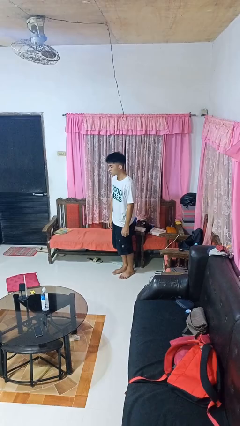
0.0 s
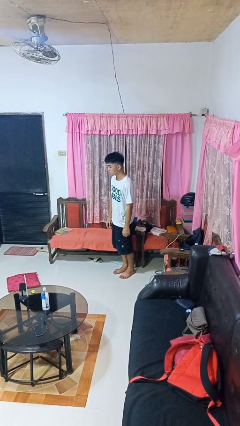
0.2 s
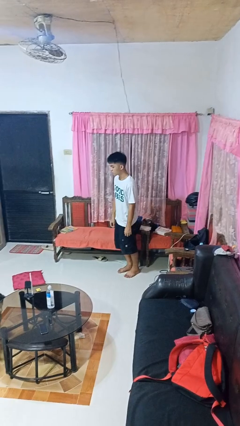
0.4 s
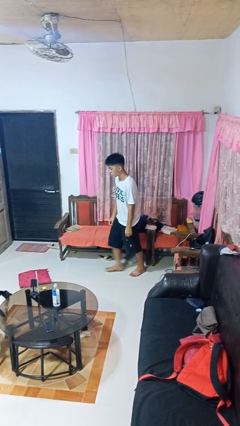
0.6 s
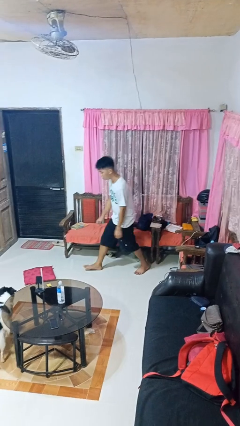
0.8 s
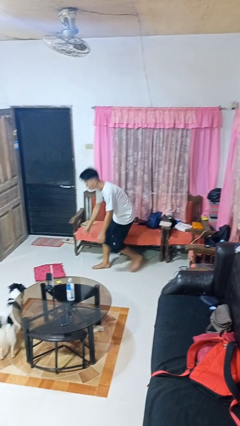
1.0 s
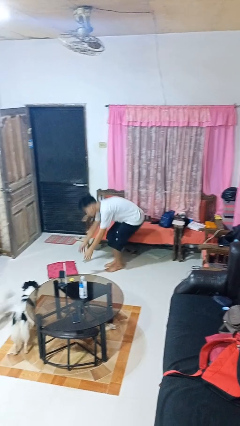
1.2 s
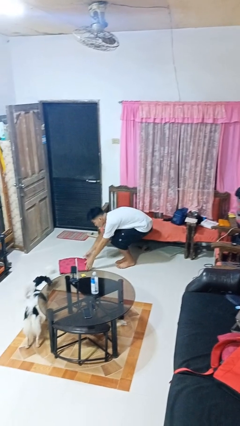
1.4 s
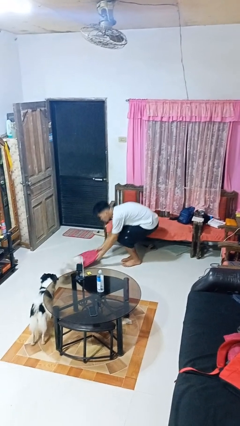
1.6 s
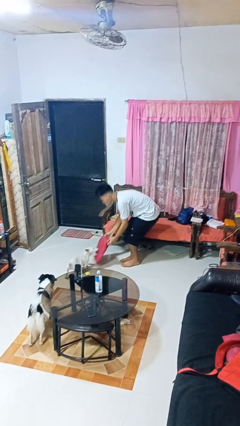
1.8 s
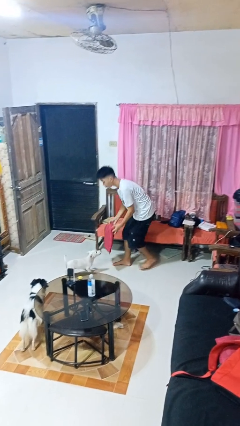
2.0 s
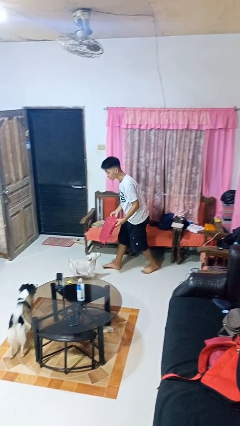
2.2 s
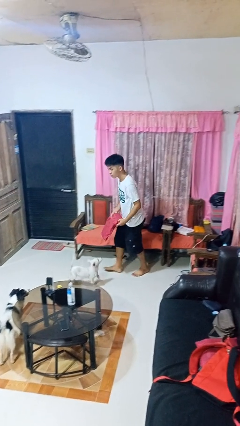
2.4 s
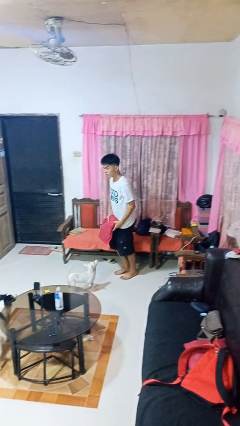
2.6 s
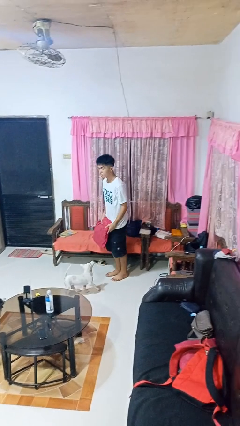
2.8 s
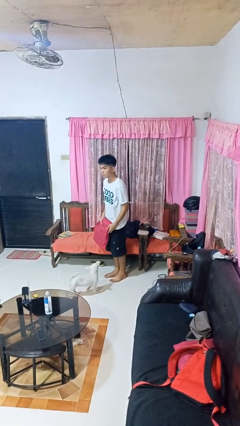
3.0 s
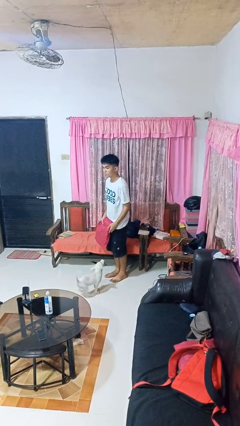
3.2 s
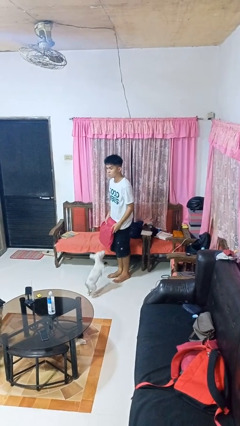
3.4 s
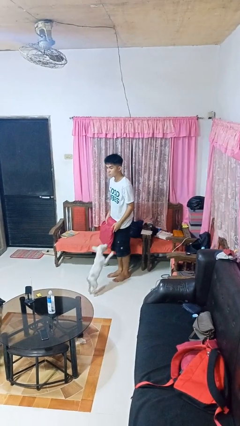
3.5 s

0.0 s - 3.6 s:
person picks up object from floor

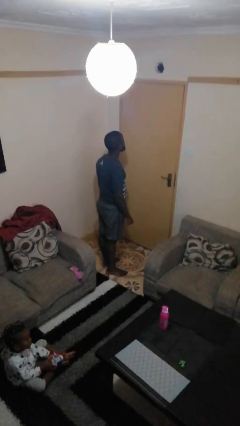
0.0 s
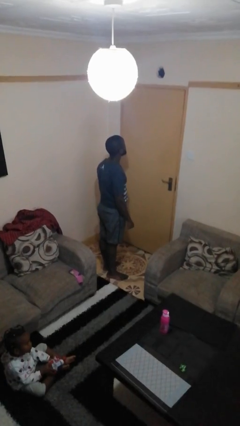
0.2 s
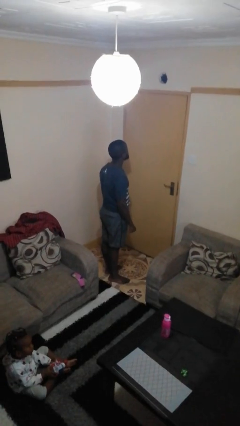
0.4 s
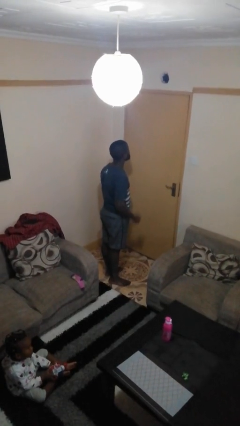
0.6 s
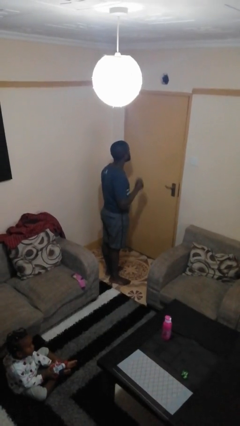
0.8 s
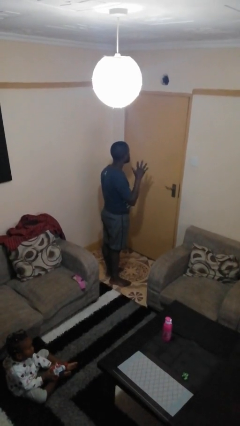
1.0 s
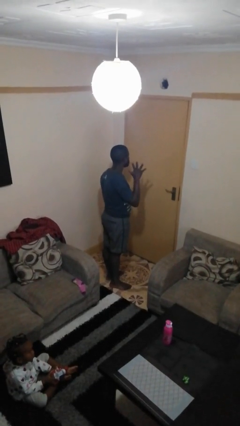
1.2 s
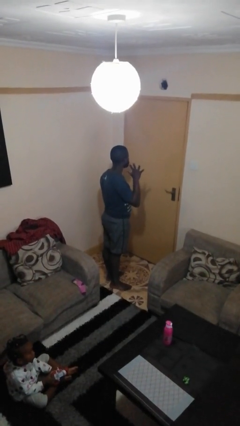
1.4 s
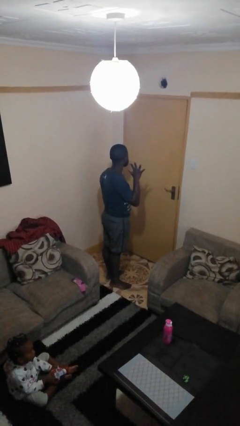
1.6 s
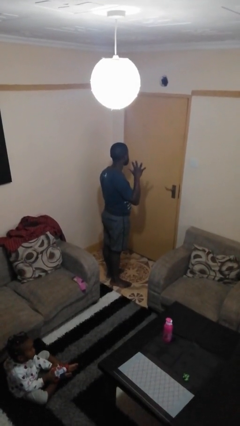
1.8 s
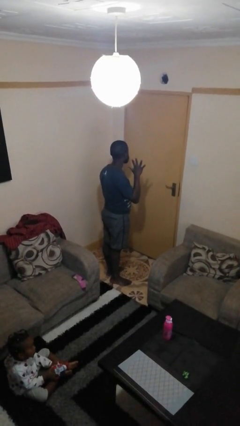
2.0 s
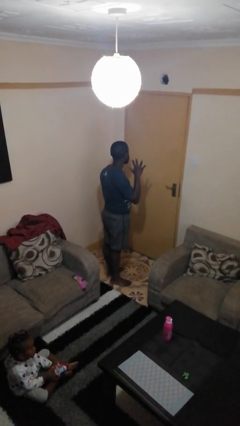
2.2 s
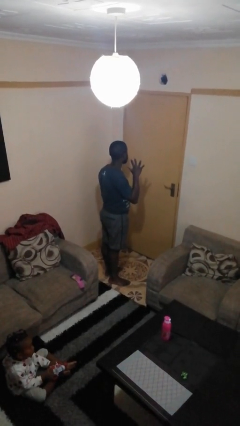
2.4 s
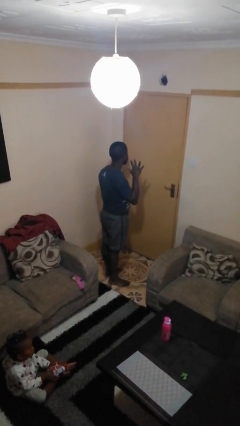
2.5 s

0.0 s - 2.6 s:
person gestures number five

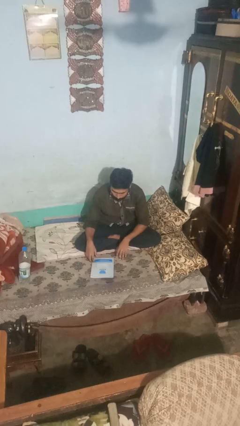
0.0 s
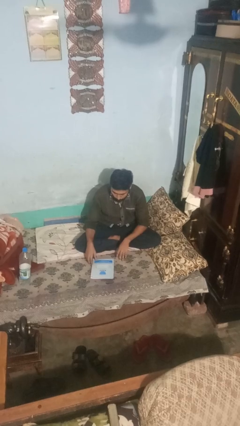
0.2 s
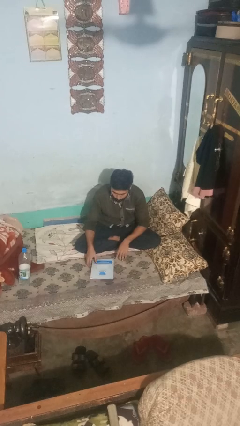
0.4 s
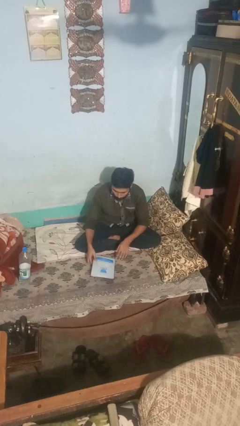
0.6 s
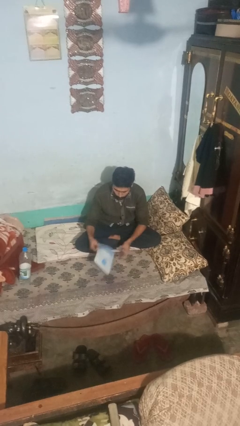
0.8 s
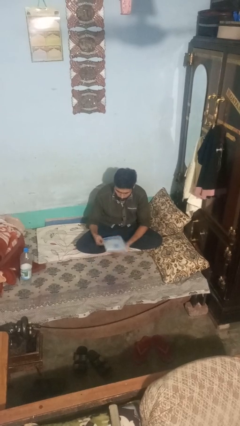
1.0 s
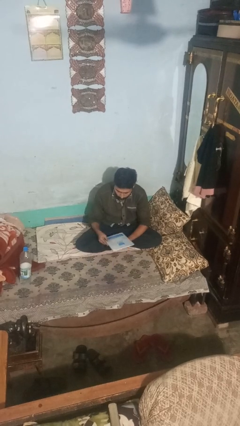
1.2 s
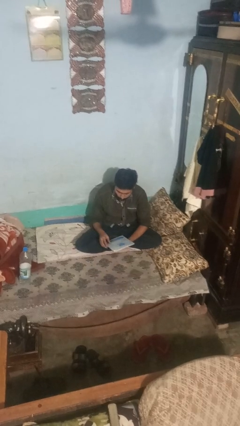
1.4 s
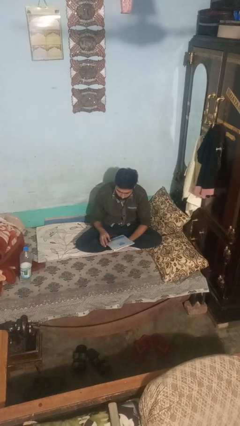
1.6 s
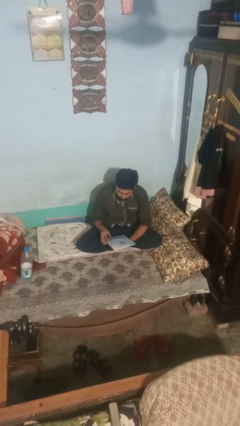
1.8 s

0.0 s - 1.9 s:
person reads book
